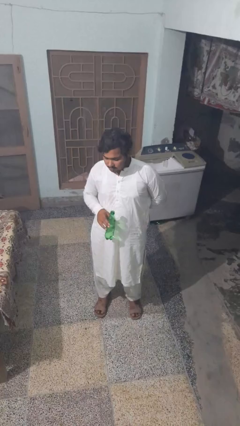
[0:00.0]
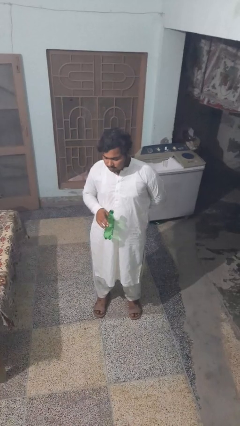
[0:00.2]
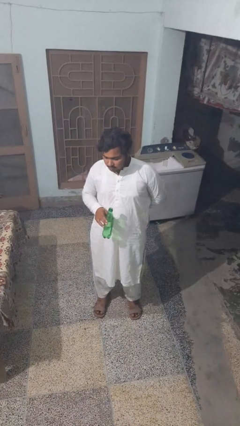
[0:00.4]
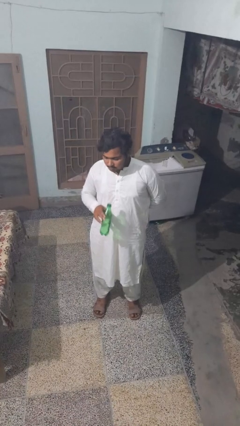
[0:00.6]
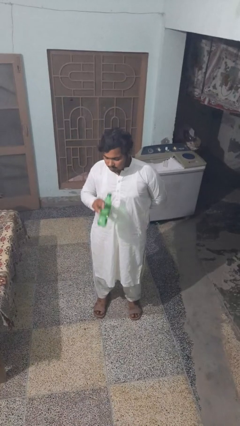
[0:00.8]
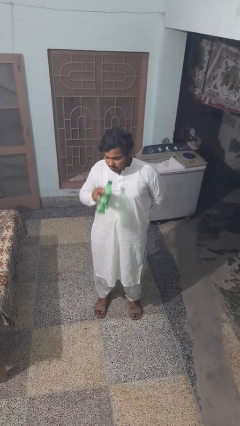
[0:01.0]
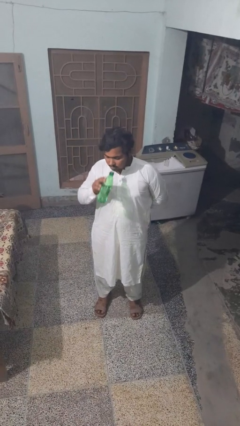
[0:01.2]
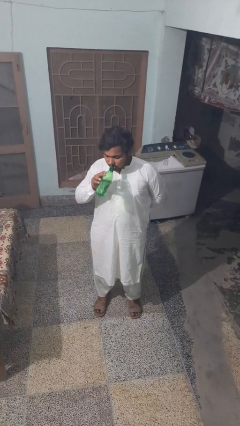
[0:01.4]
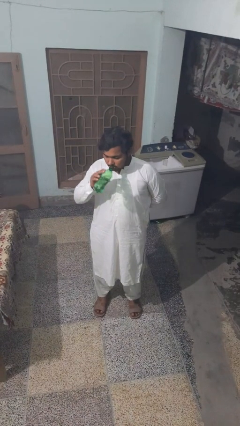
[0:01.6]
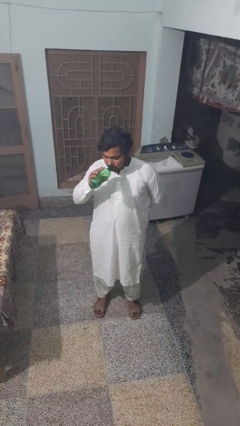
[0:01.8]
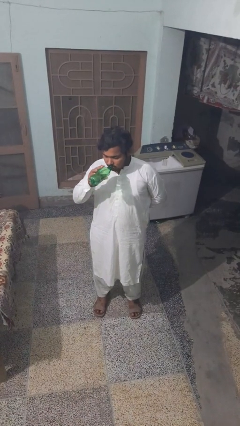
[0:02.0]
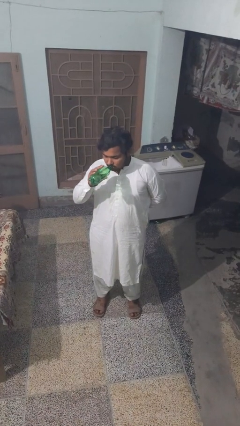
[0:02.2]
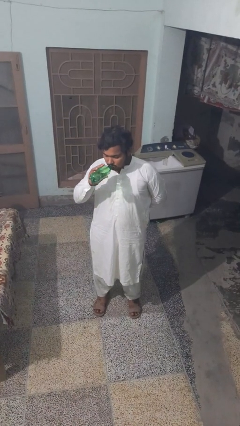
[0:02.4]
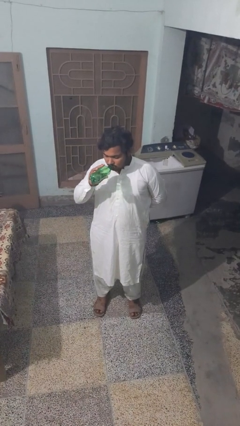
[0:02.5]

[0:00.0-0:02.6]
person drinks from bottle

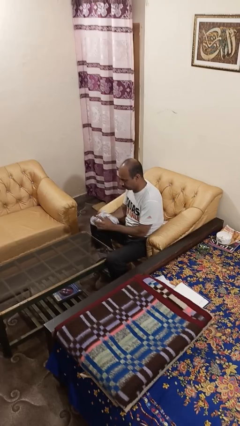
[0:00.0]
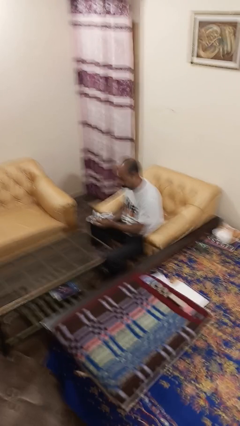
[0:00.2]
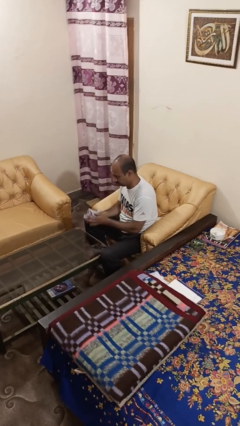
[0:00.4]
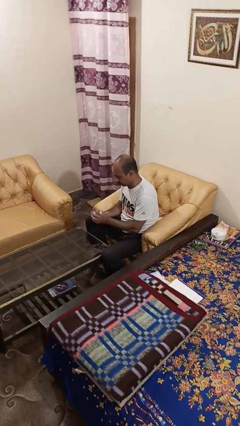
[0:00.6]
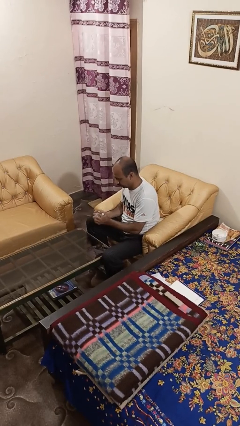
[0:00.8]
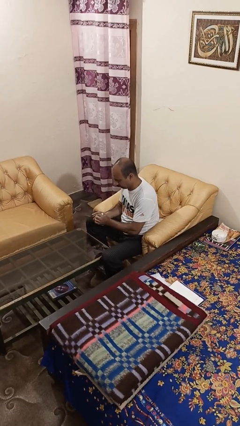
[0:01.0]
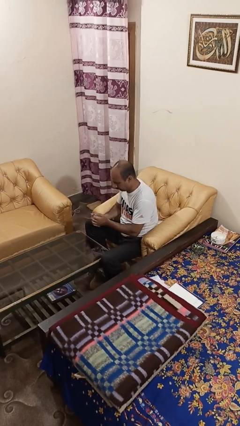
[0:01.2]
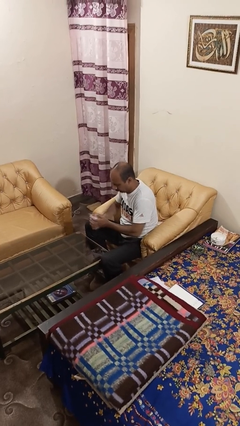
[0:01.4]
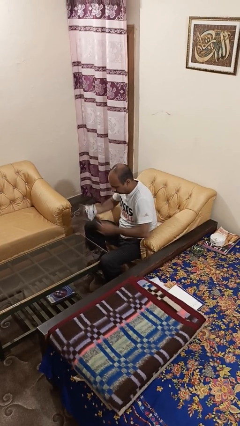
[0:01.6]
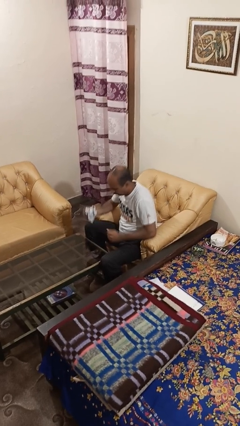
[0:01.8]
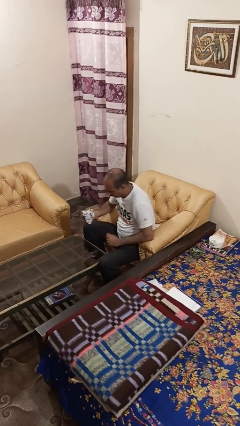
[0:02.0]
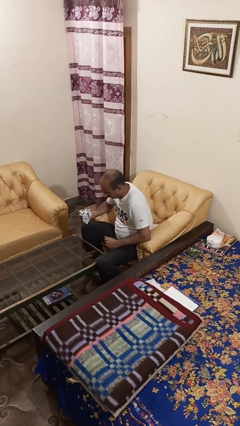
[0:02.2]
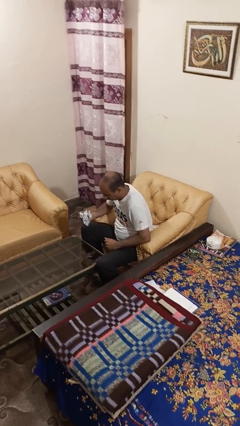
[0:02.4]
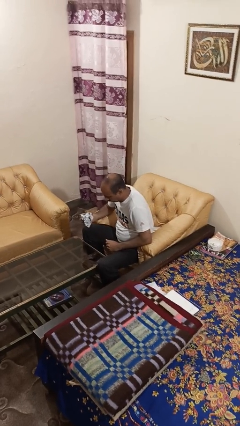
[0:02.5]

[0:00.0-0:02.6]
person crumples paper

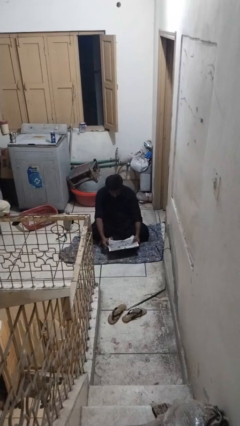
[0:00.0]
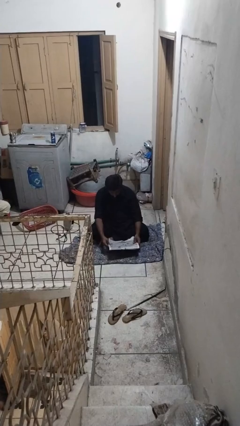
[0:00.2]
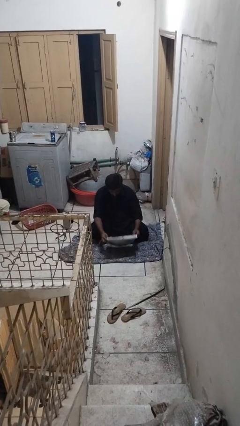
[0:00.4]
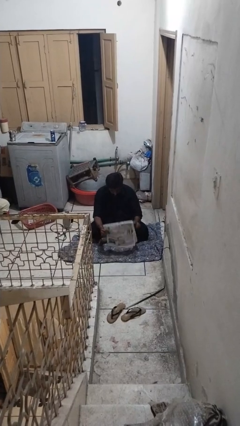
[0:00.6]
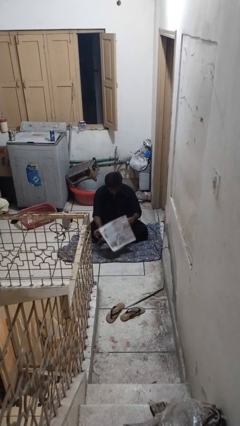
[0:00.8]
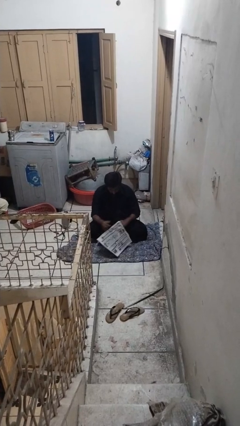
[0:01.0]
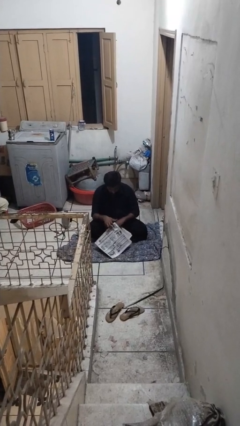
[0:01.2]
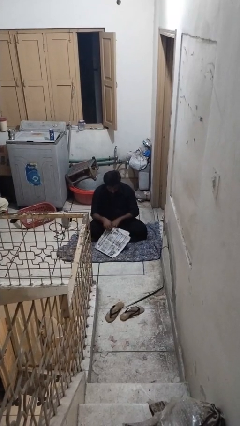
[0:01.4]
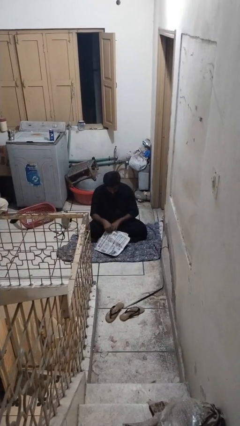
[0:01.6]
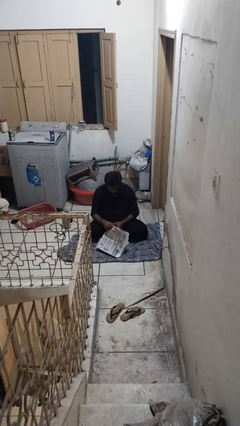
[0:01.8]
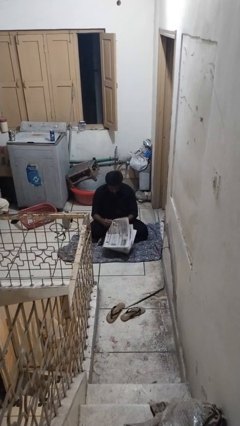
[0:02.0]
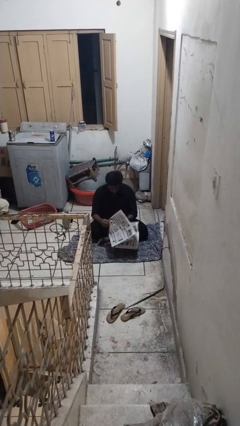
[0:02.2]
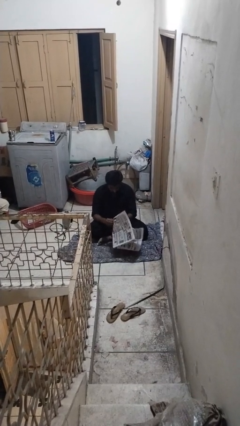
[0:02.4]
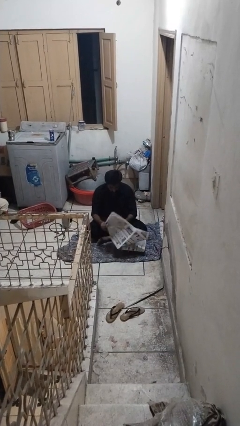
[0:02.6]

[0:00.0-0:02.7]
person reads newspaper

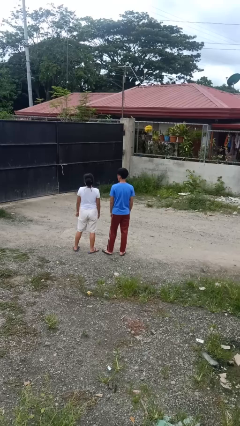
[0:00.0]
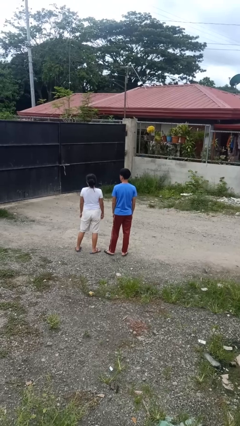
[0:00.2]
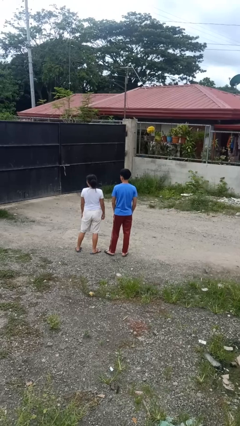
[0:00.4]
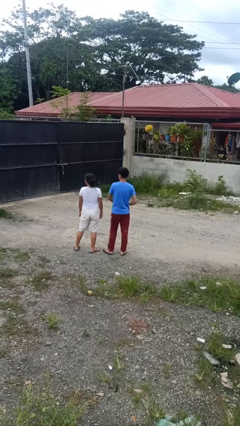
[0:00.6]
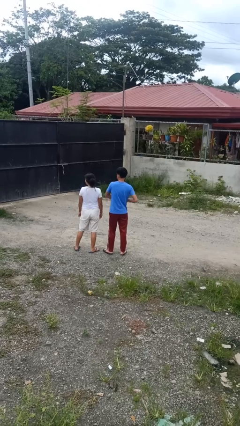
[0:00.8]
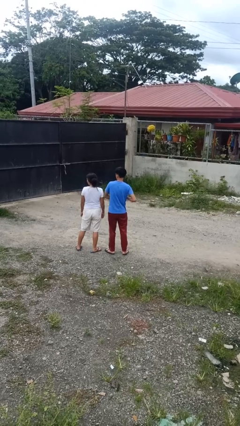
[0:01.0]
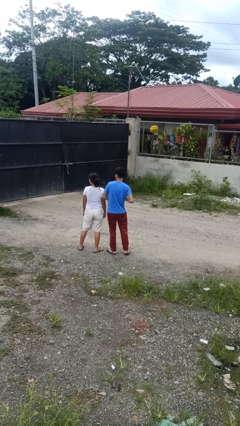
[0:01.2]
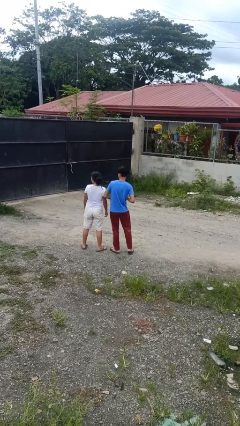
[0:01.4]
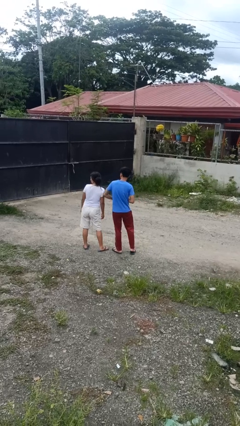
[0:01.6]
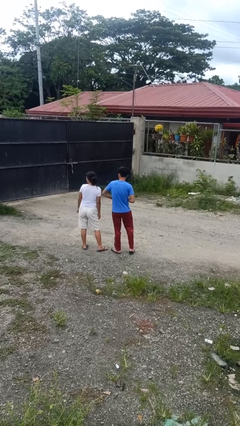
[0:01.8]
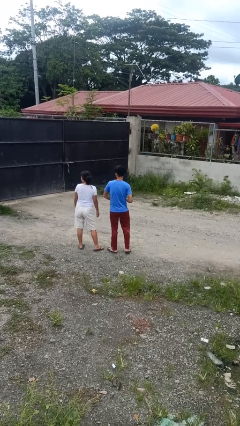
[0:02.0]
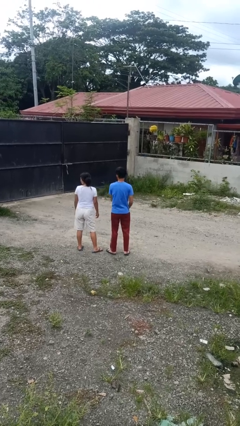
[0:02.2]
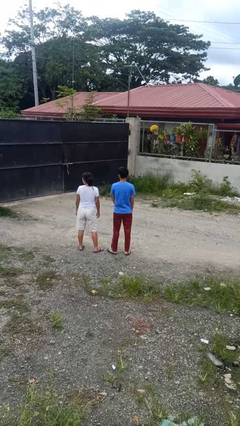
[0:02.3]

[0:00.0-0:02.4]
person nudges person with elbow

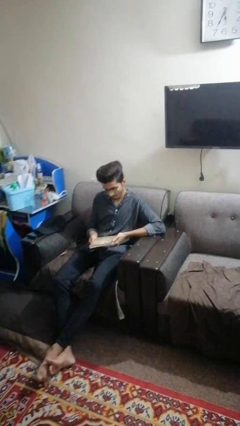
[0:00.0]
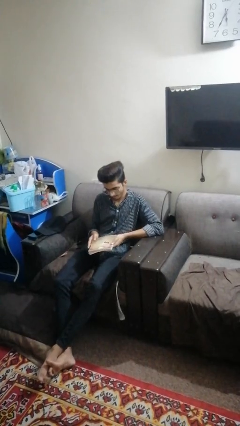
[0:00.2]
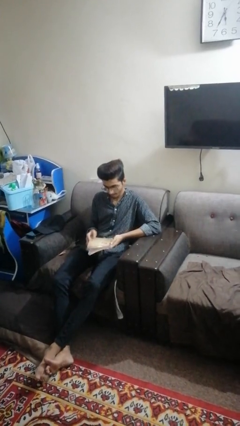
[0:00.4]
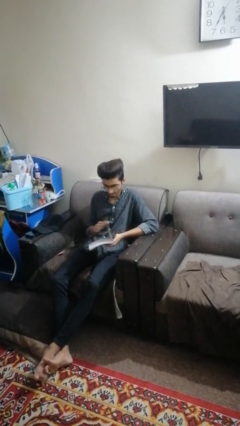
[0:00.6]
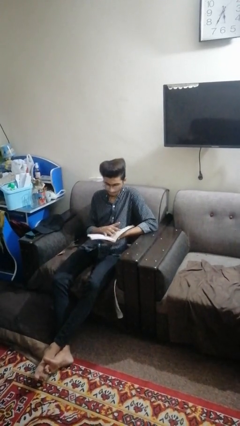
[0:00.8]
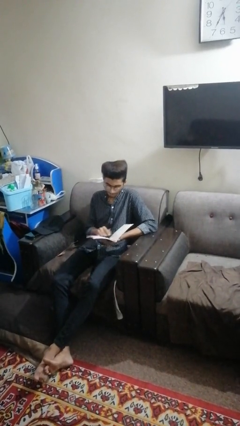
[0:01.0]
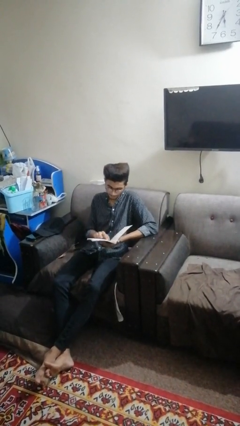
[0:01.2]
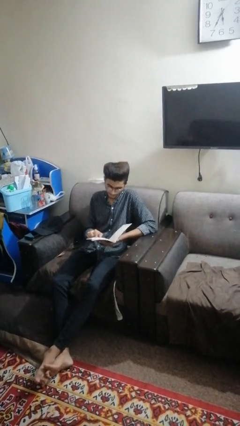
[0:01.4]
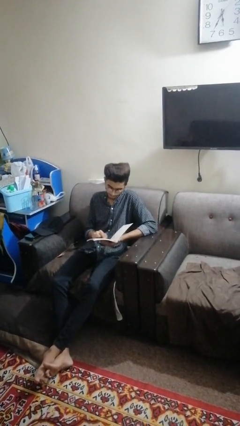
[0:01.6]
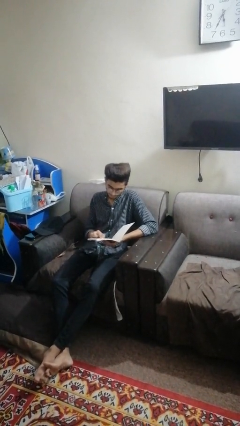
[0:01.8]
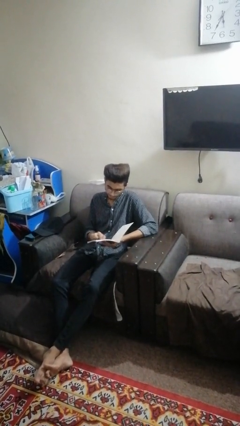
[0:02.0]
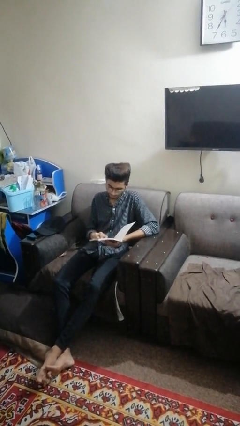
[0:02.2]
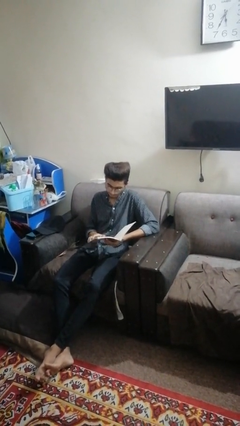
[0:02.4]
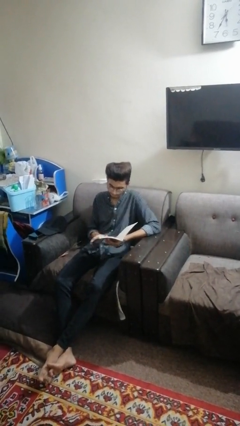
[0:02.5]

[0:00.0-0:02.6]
person reads book

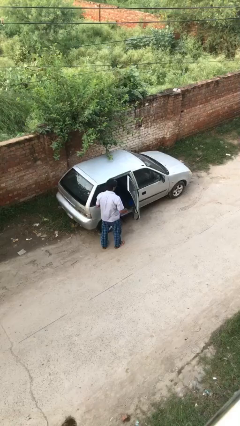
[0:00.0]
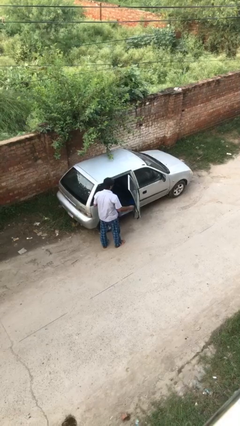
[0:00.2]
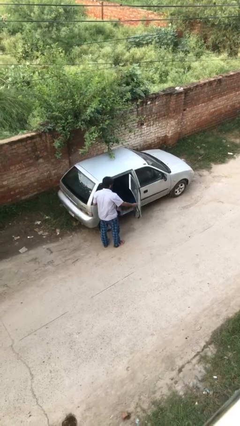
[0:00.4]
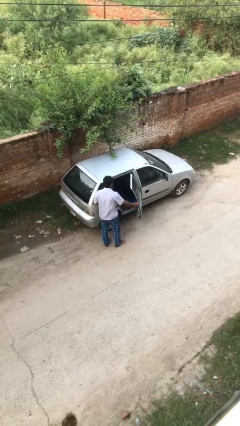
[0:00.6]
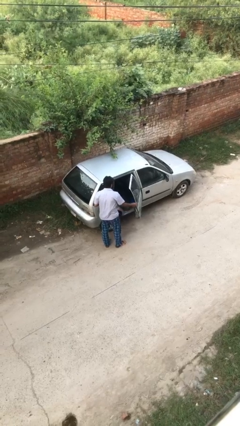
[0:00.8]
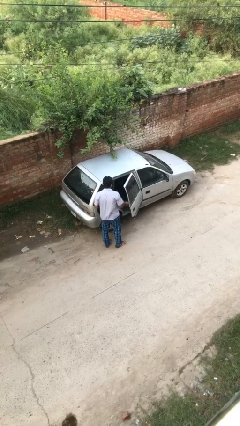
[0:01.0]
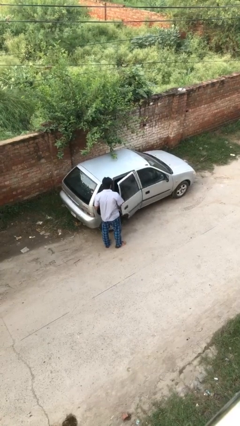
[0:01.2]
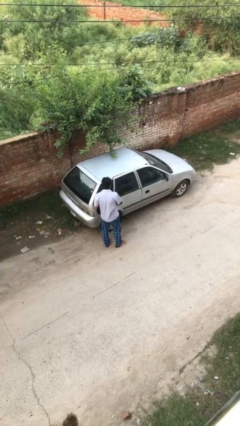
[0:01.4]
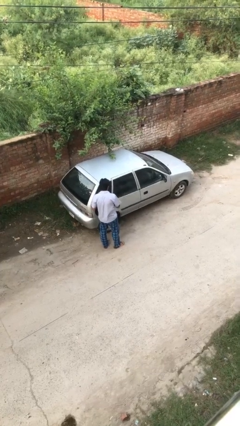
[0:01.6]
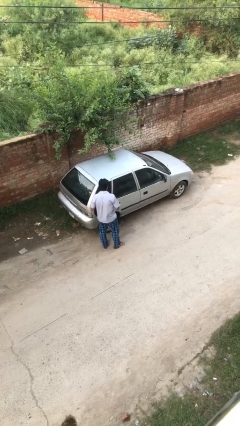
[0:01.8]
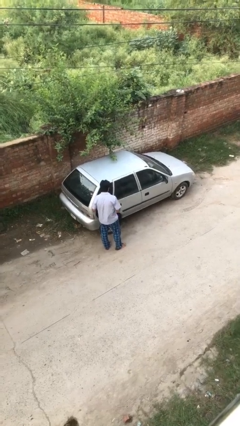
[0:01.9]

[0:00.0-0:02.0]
person closes car door

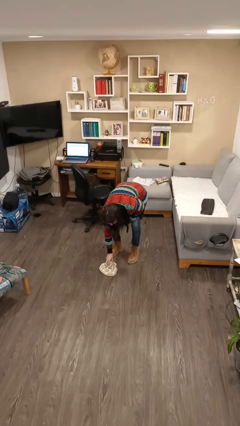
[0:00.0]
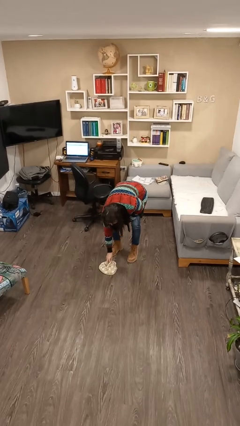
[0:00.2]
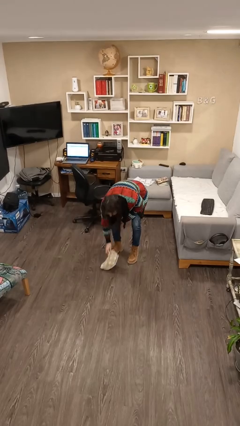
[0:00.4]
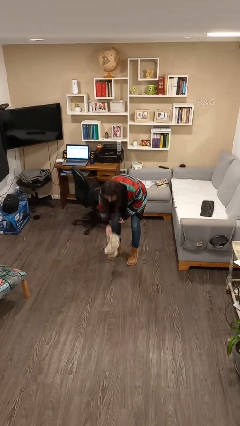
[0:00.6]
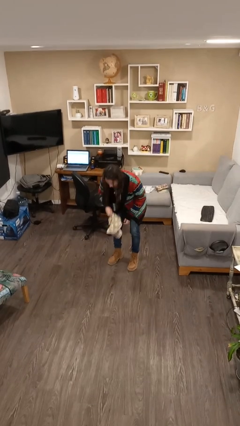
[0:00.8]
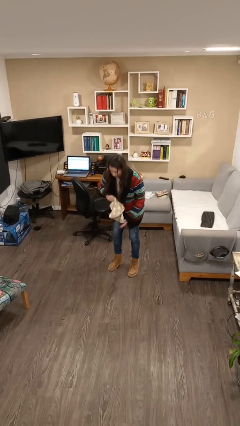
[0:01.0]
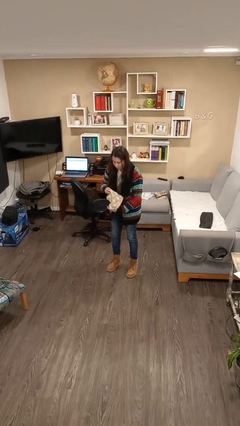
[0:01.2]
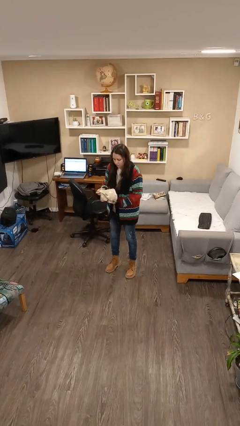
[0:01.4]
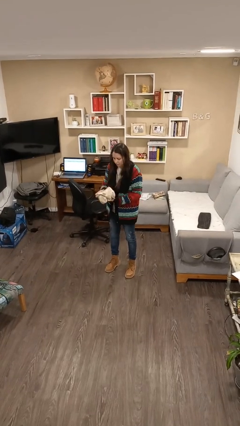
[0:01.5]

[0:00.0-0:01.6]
person picks up object from floor
